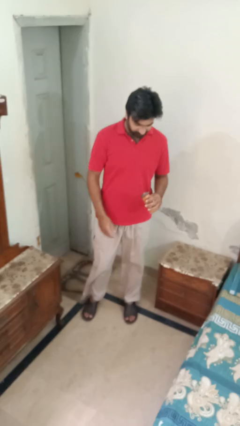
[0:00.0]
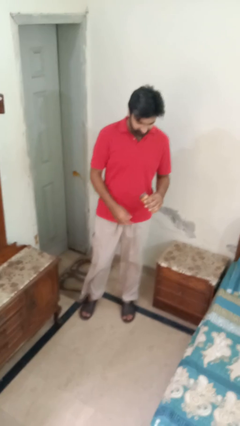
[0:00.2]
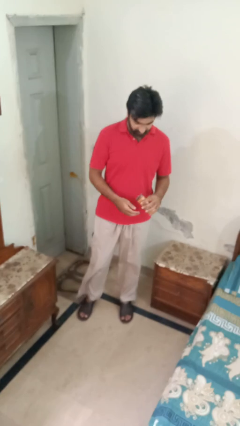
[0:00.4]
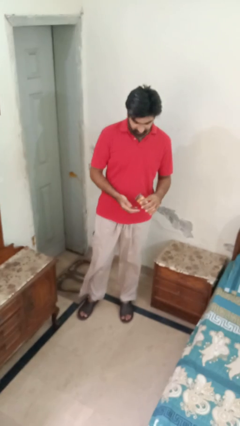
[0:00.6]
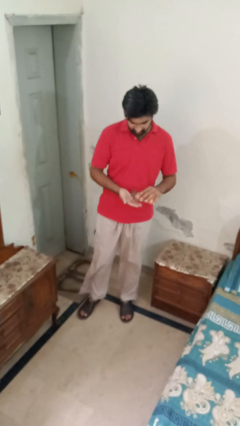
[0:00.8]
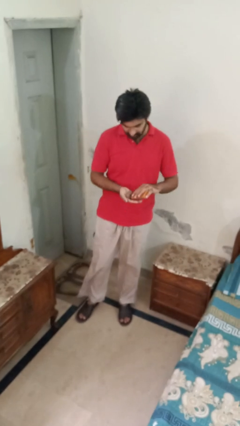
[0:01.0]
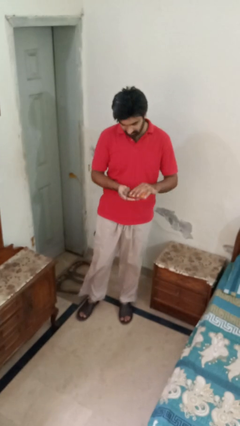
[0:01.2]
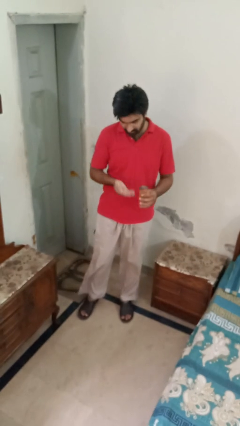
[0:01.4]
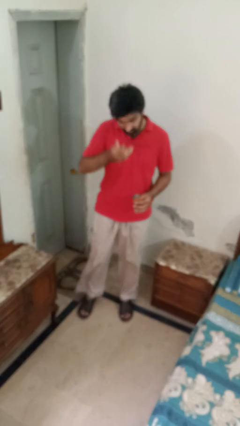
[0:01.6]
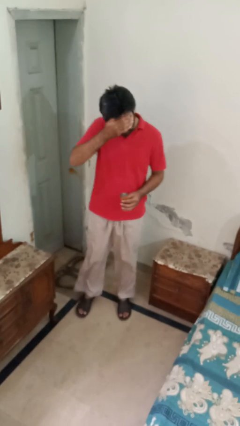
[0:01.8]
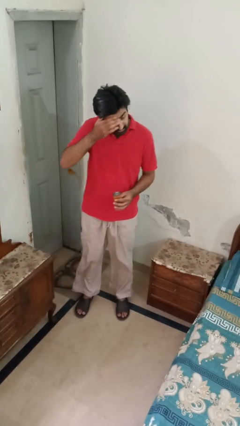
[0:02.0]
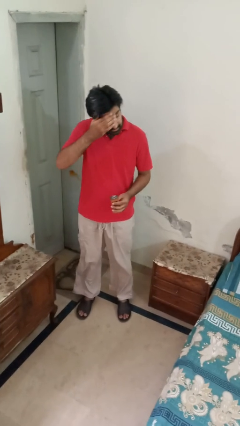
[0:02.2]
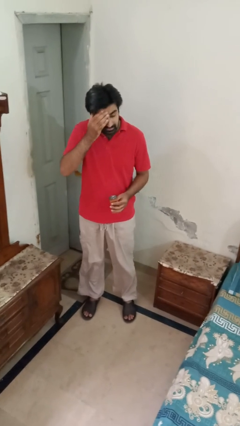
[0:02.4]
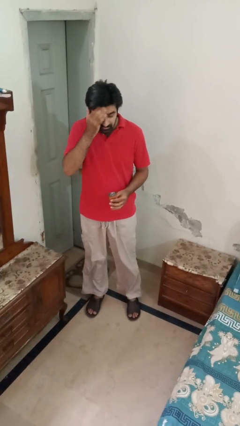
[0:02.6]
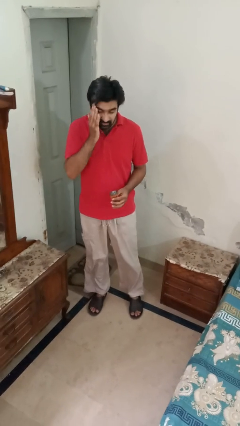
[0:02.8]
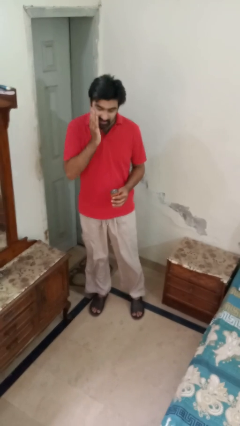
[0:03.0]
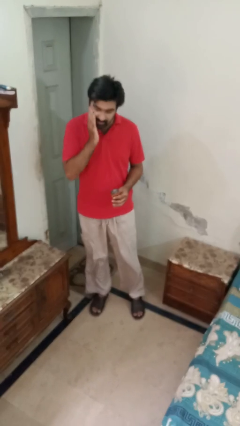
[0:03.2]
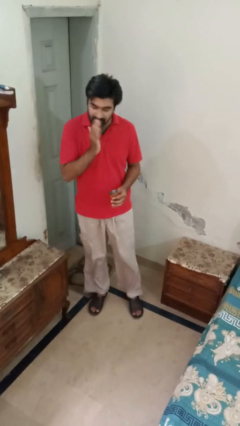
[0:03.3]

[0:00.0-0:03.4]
person applies sunscreen

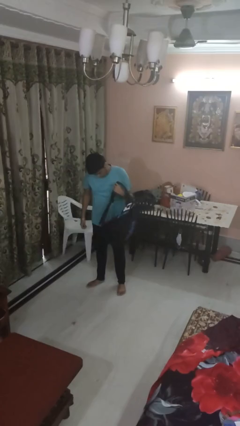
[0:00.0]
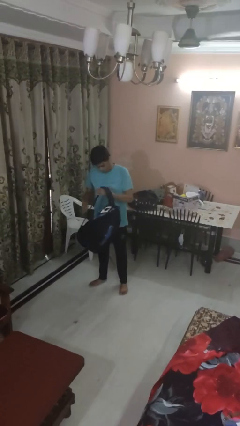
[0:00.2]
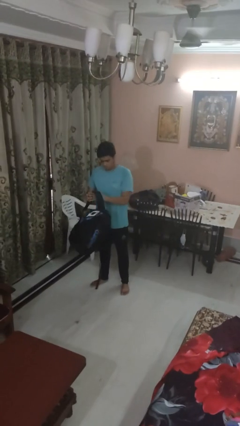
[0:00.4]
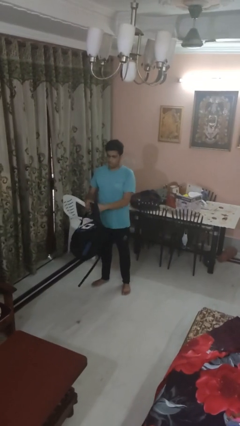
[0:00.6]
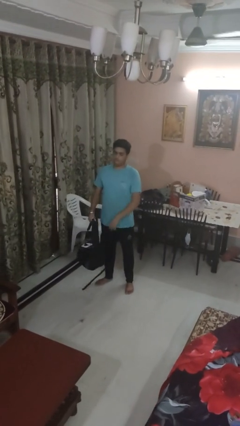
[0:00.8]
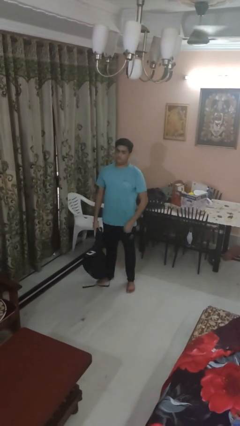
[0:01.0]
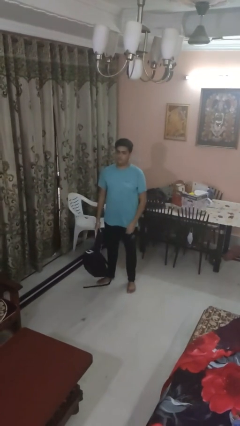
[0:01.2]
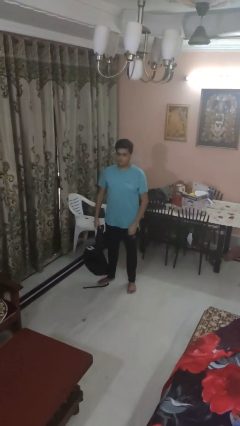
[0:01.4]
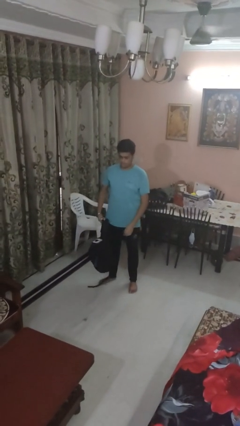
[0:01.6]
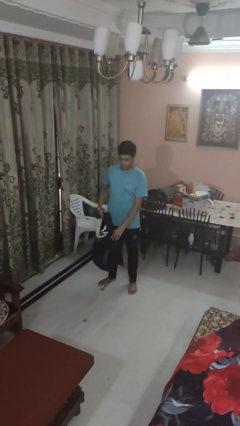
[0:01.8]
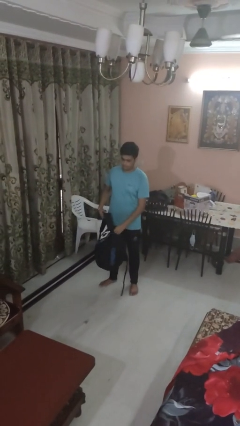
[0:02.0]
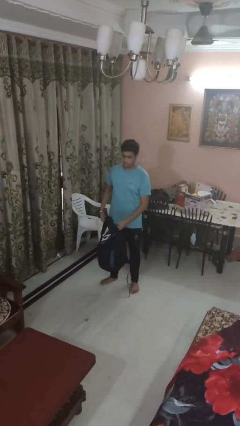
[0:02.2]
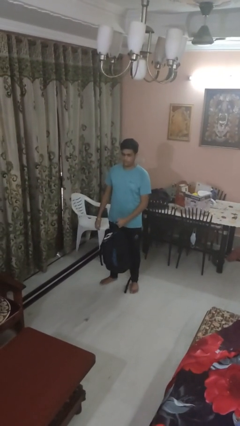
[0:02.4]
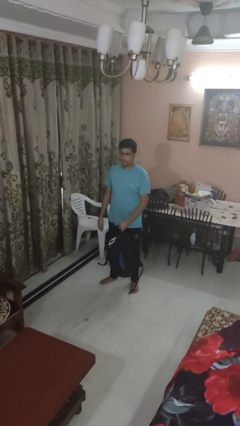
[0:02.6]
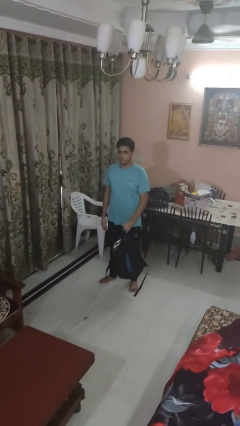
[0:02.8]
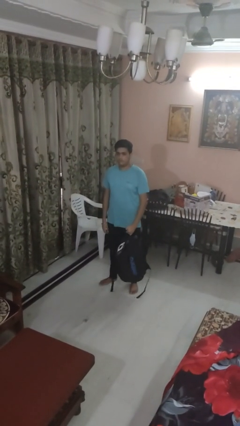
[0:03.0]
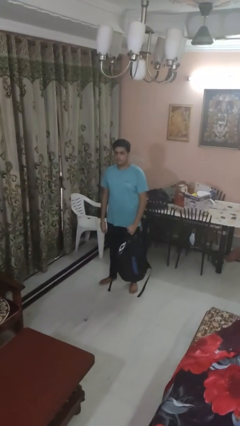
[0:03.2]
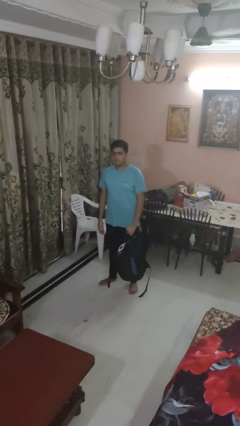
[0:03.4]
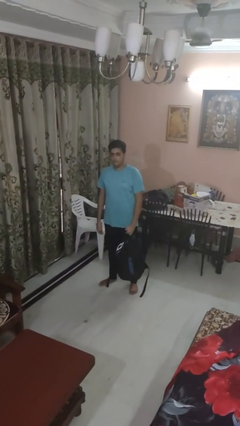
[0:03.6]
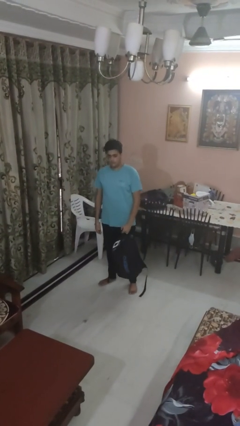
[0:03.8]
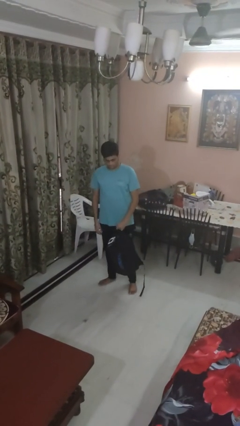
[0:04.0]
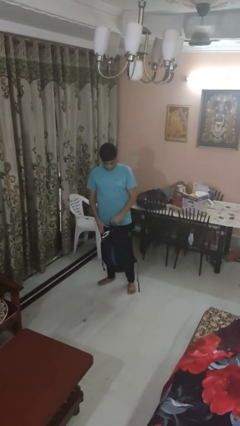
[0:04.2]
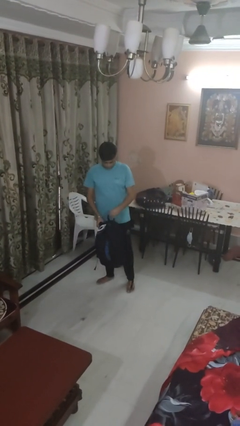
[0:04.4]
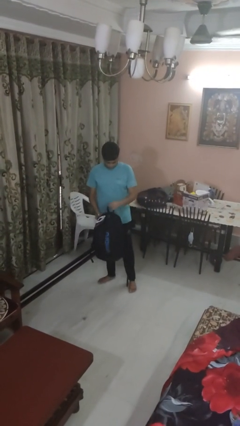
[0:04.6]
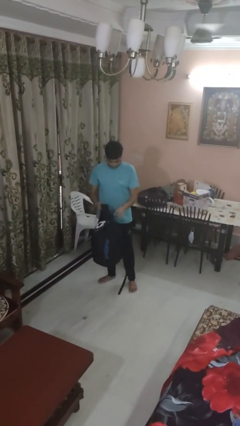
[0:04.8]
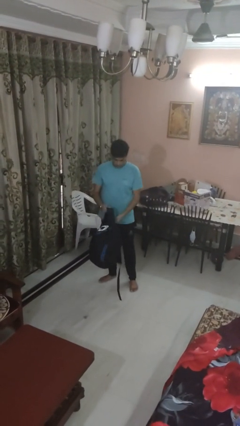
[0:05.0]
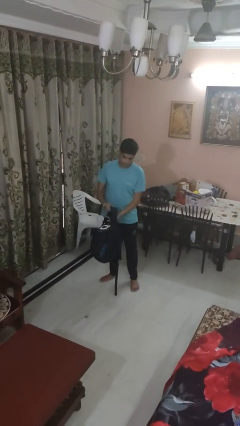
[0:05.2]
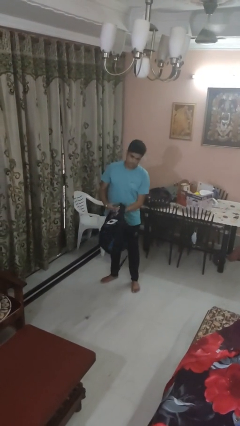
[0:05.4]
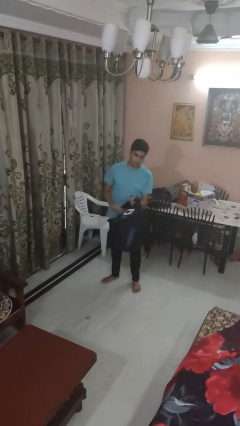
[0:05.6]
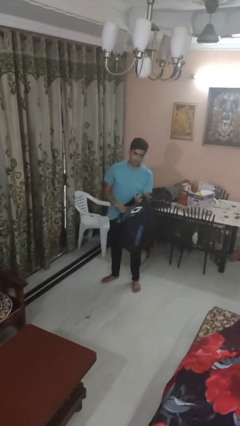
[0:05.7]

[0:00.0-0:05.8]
person takes off backpack

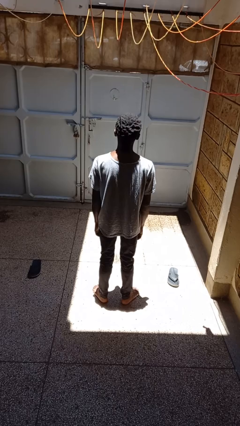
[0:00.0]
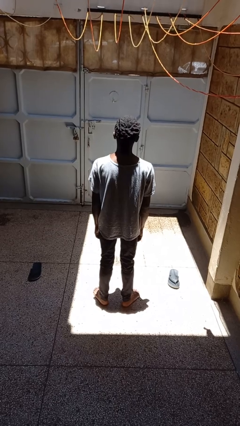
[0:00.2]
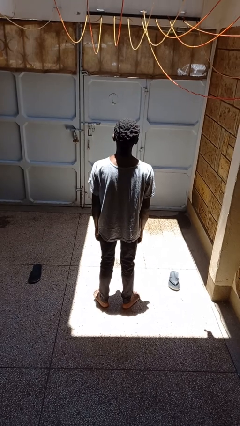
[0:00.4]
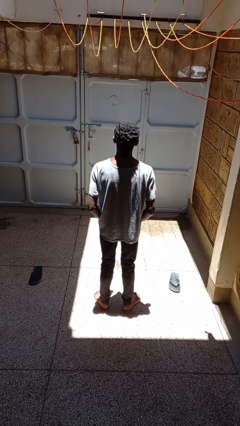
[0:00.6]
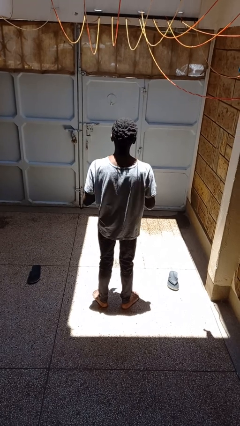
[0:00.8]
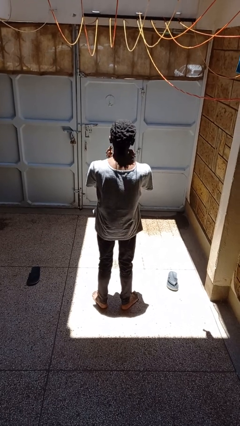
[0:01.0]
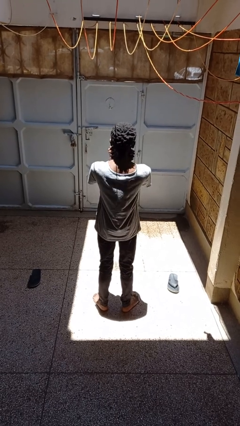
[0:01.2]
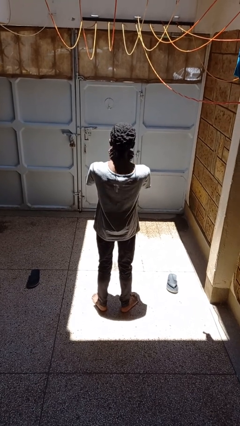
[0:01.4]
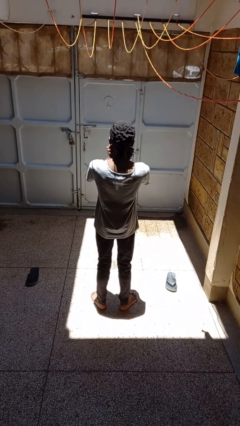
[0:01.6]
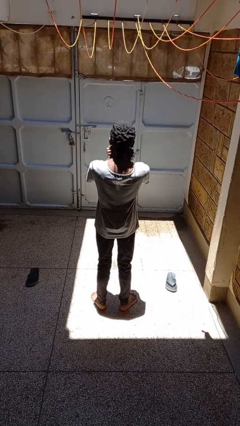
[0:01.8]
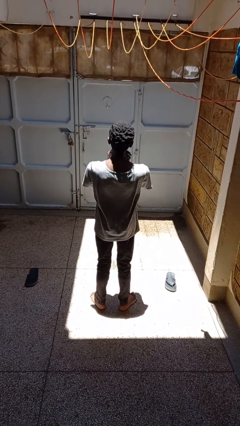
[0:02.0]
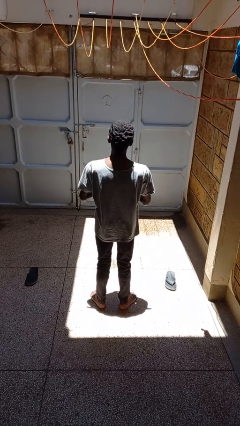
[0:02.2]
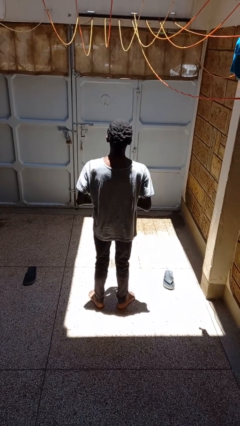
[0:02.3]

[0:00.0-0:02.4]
person rubs neck

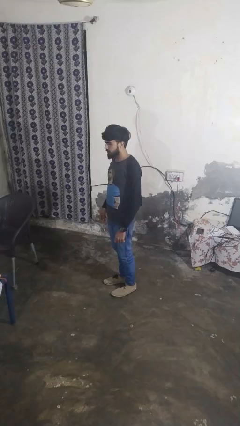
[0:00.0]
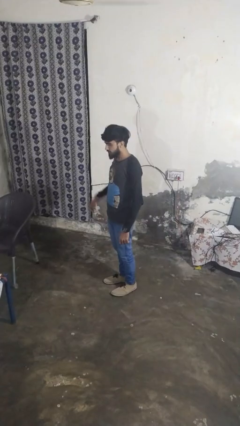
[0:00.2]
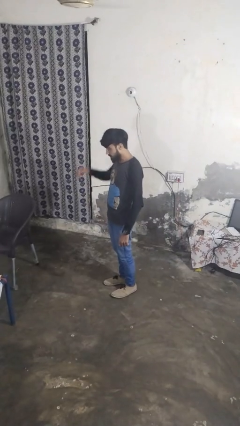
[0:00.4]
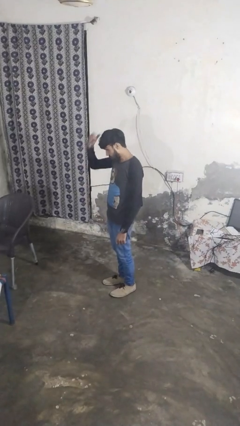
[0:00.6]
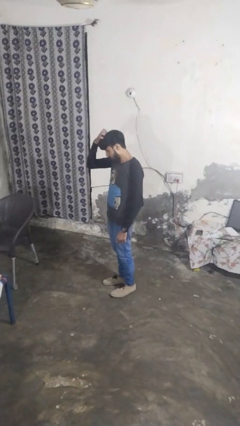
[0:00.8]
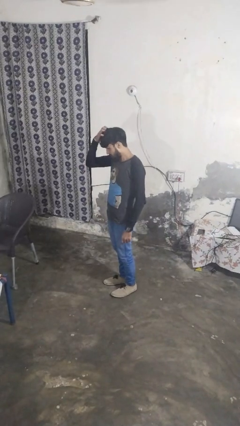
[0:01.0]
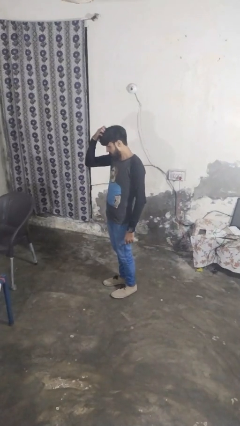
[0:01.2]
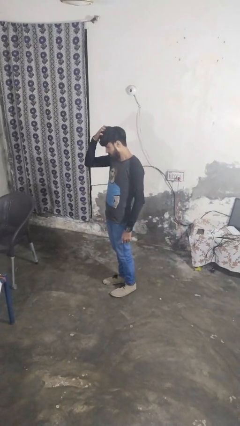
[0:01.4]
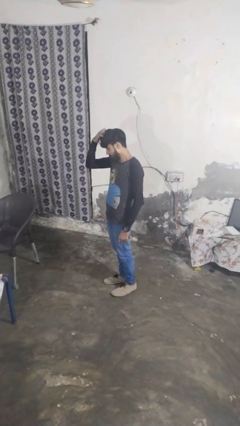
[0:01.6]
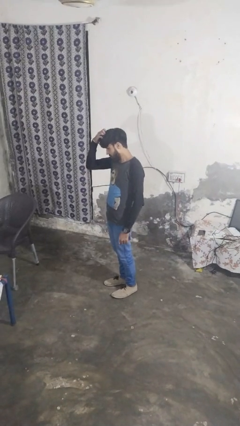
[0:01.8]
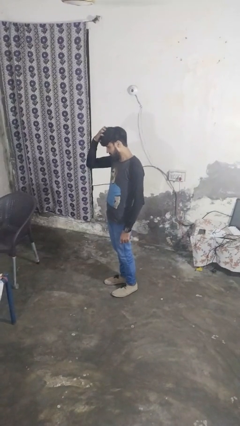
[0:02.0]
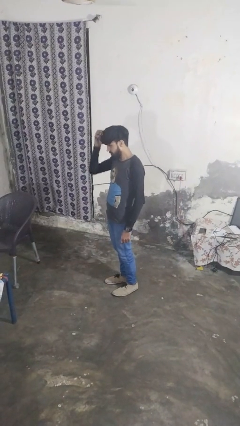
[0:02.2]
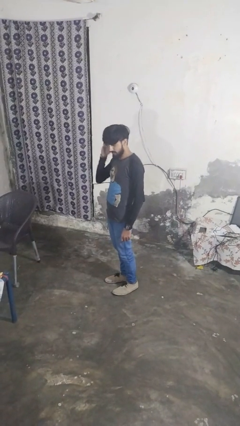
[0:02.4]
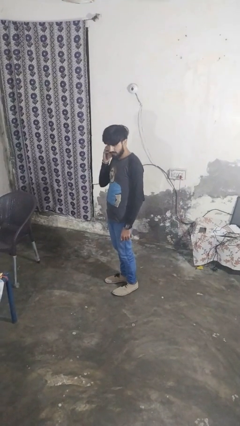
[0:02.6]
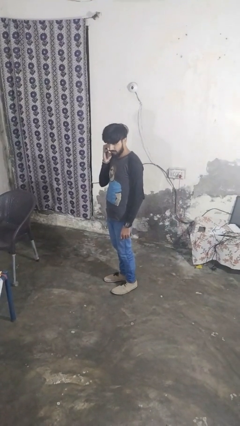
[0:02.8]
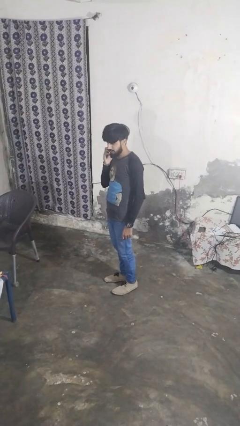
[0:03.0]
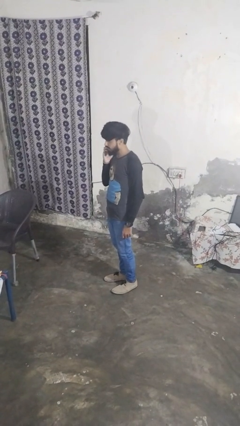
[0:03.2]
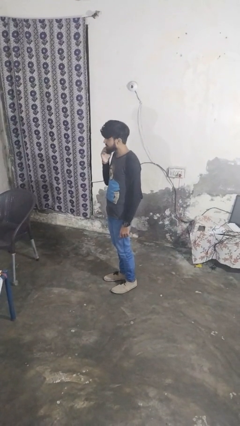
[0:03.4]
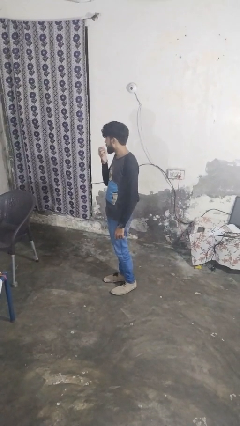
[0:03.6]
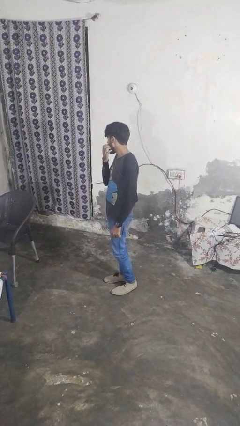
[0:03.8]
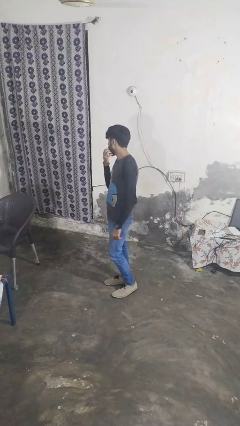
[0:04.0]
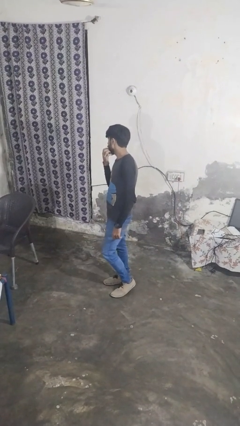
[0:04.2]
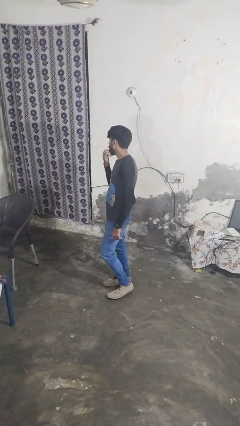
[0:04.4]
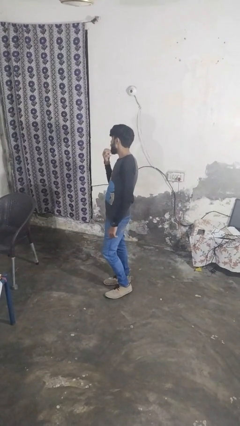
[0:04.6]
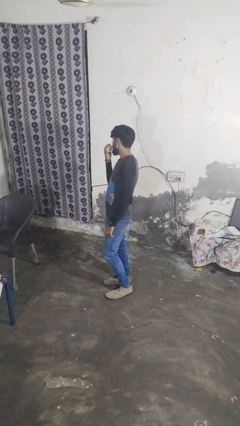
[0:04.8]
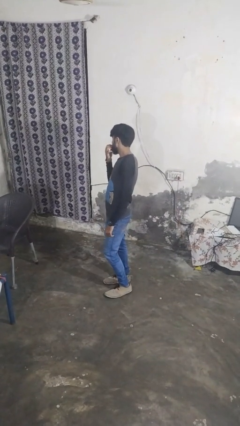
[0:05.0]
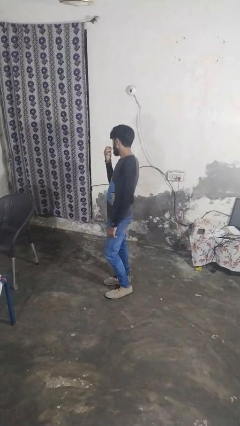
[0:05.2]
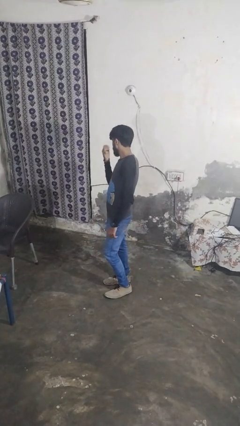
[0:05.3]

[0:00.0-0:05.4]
person scratches face

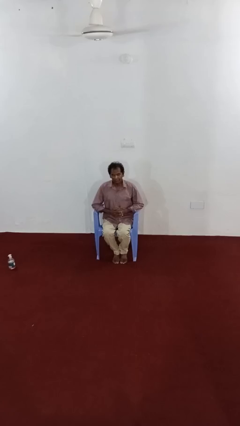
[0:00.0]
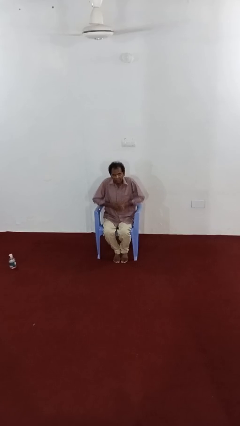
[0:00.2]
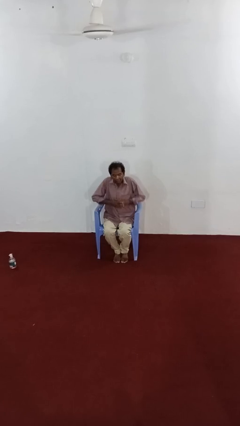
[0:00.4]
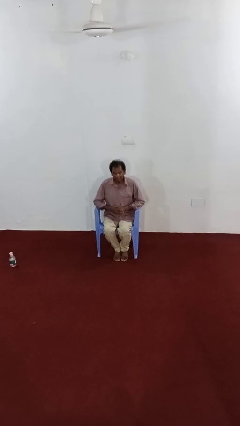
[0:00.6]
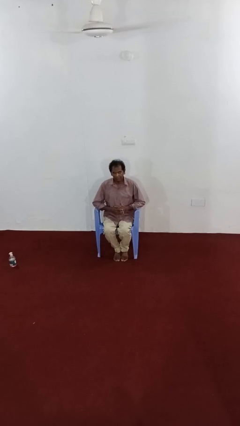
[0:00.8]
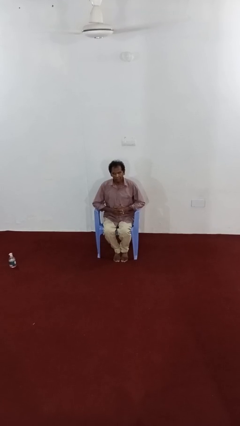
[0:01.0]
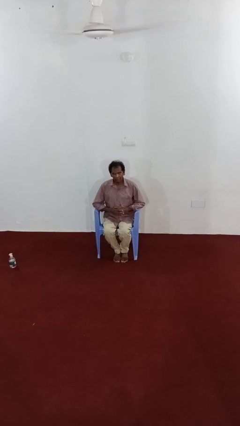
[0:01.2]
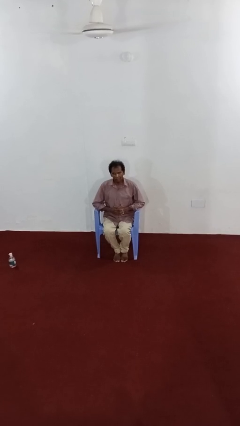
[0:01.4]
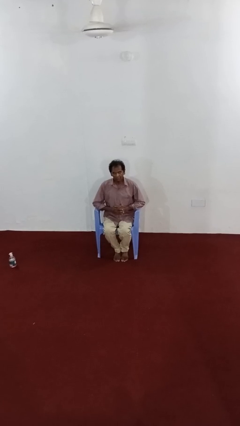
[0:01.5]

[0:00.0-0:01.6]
person shrugs
